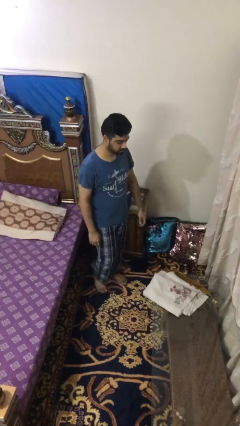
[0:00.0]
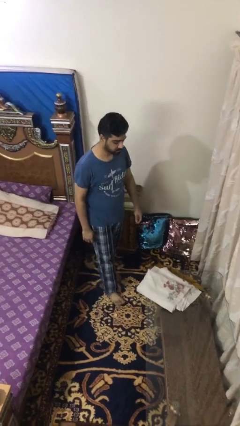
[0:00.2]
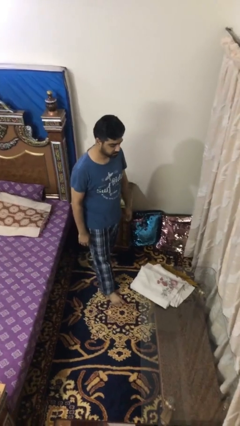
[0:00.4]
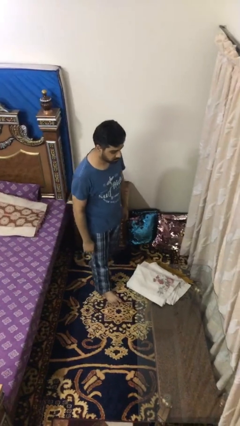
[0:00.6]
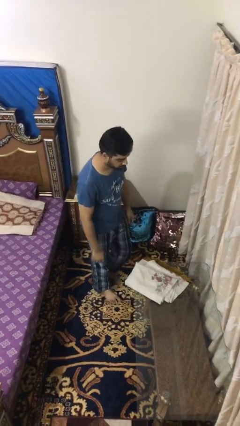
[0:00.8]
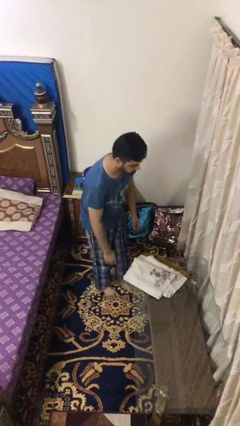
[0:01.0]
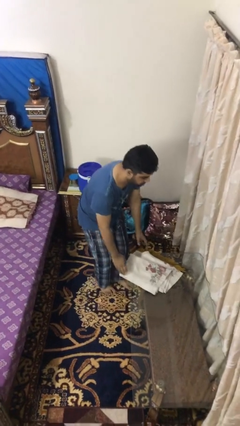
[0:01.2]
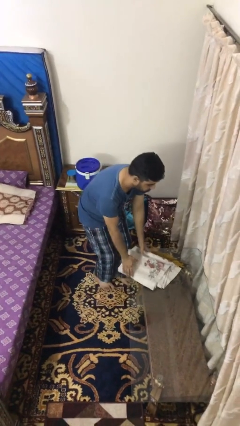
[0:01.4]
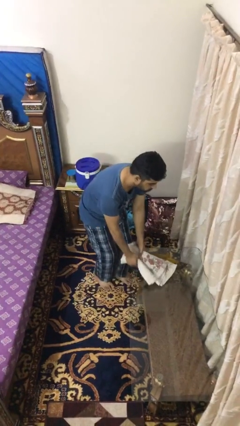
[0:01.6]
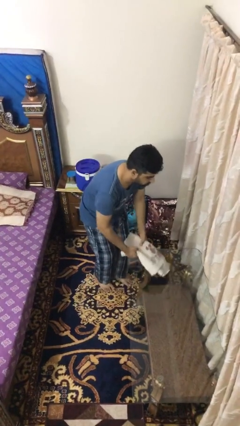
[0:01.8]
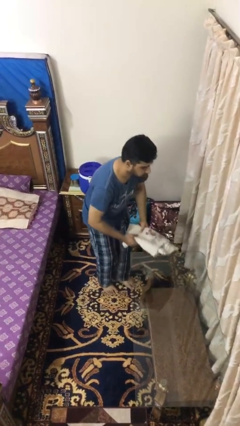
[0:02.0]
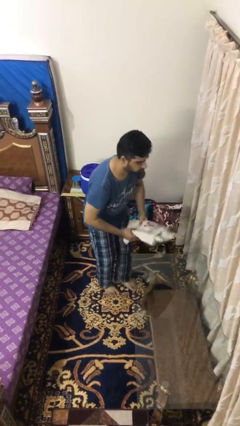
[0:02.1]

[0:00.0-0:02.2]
person picks up object from table

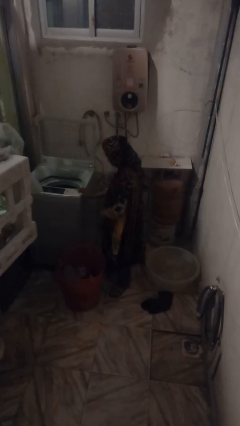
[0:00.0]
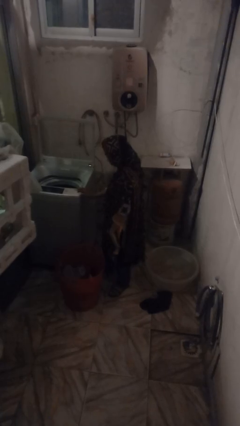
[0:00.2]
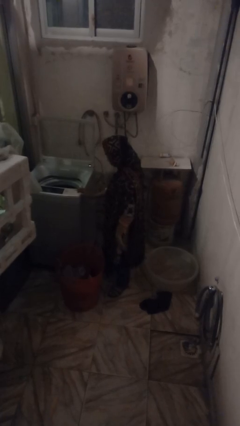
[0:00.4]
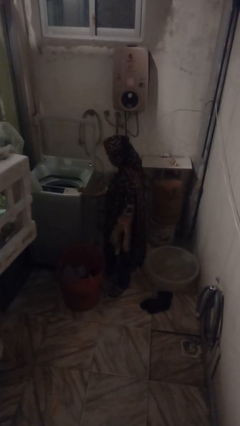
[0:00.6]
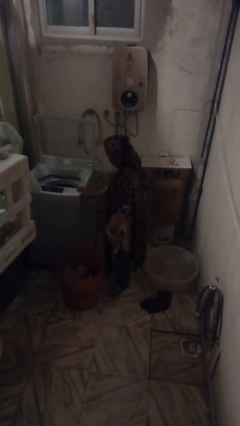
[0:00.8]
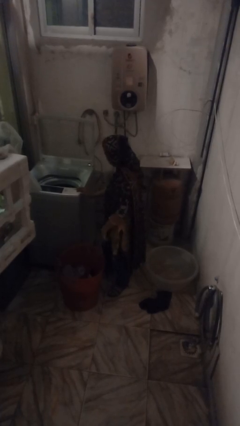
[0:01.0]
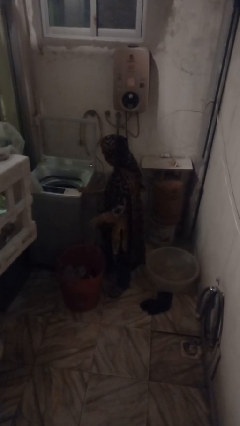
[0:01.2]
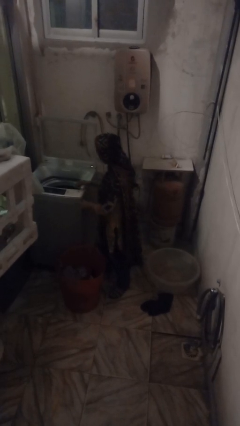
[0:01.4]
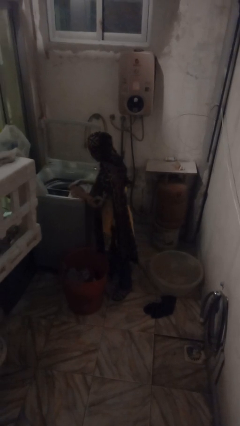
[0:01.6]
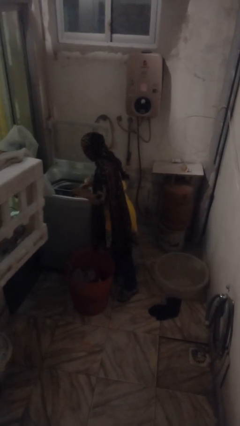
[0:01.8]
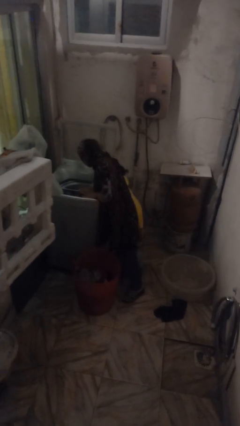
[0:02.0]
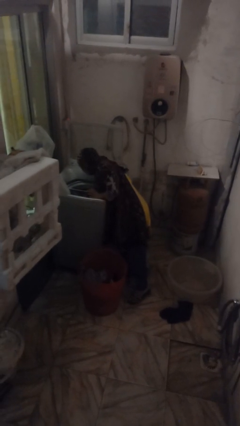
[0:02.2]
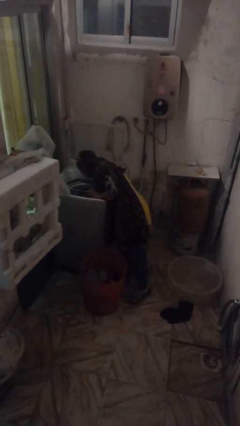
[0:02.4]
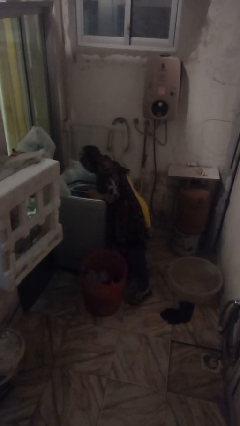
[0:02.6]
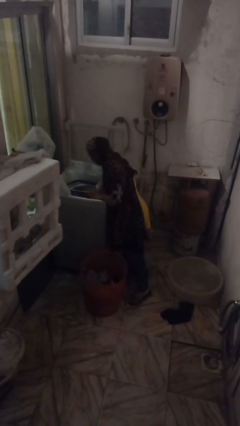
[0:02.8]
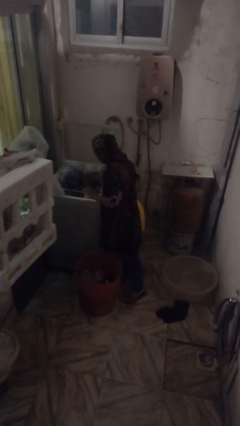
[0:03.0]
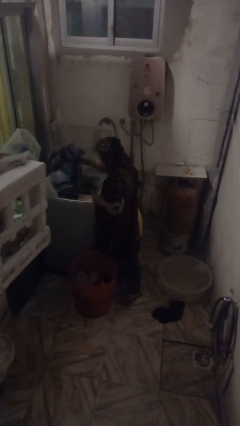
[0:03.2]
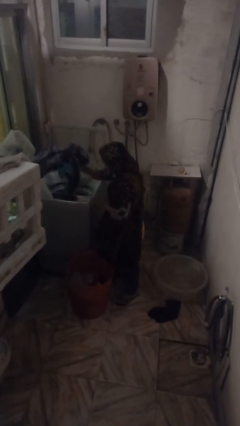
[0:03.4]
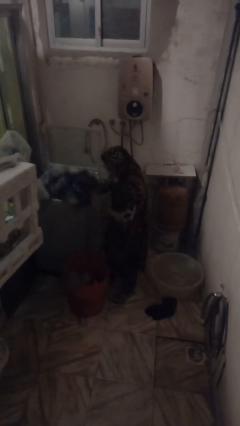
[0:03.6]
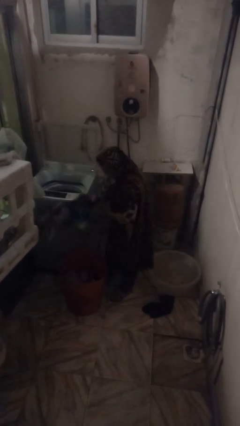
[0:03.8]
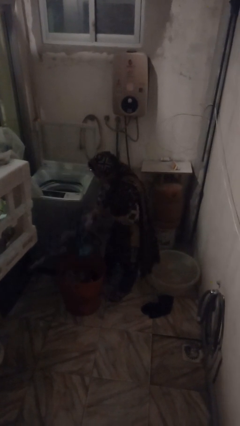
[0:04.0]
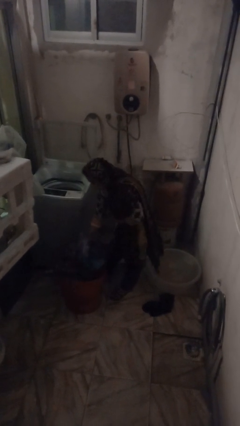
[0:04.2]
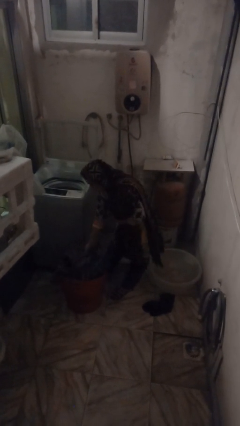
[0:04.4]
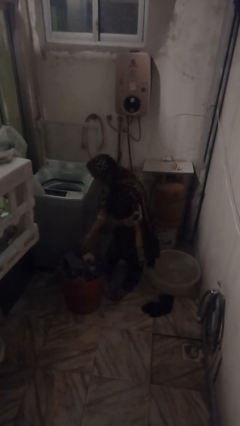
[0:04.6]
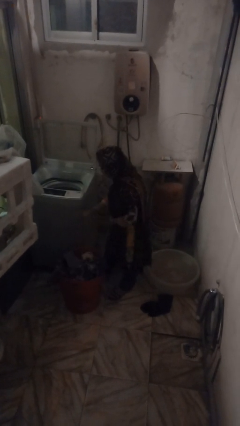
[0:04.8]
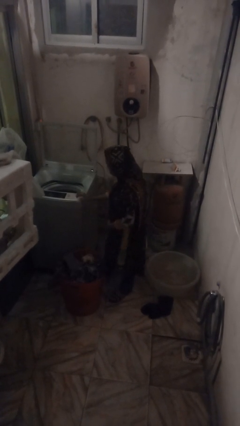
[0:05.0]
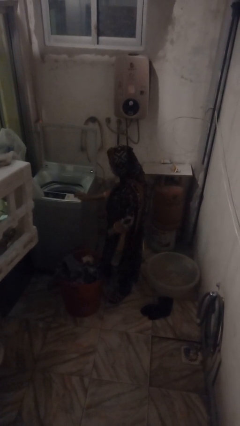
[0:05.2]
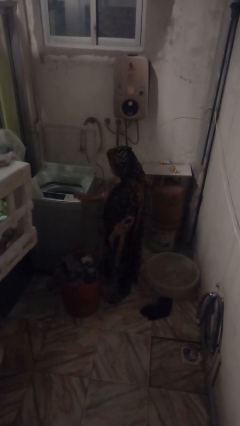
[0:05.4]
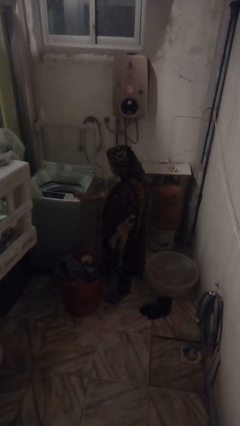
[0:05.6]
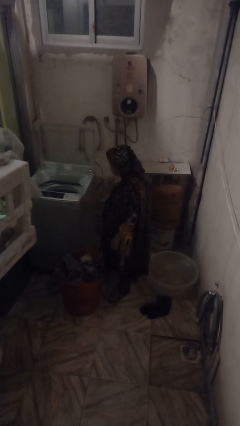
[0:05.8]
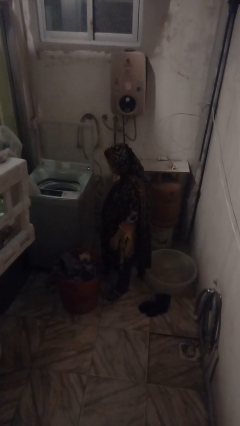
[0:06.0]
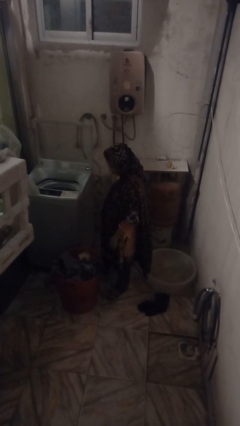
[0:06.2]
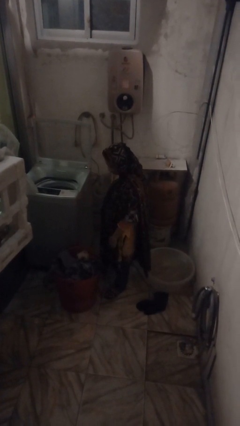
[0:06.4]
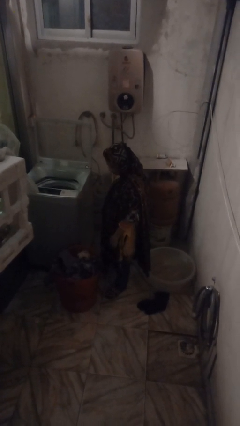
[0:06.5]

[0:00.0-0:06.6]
person unloads clotheswasher

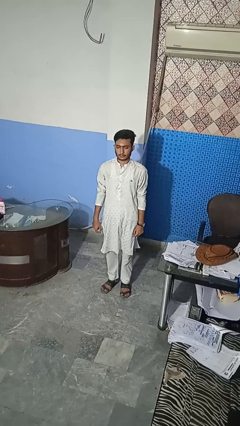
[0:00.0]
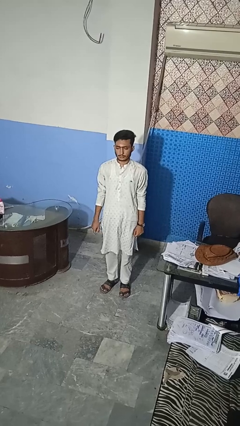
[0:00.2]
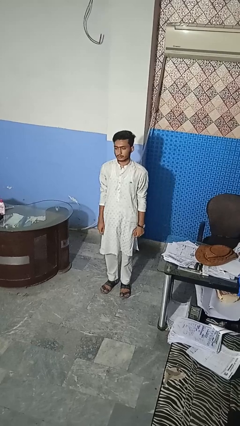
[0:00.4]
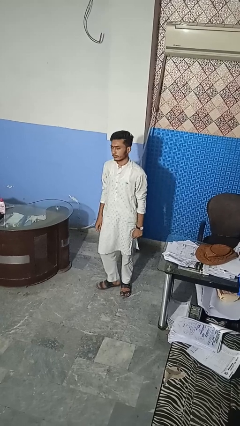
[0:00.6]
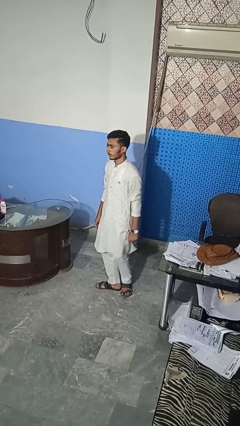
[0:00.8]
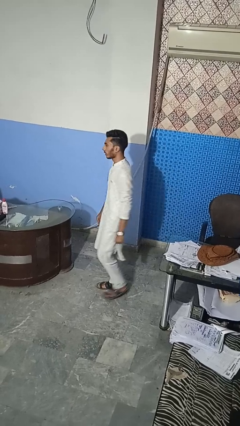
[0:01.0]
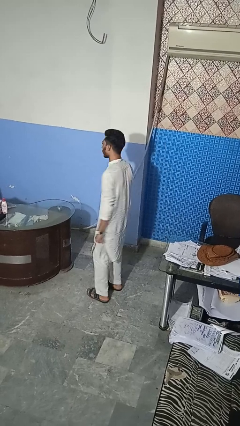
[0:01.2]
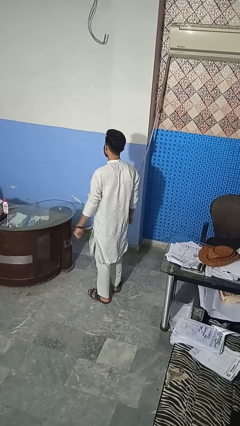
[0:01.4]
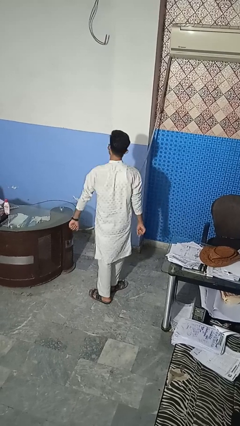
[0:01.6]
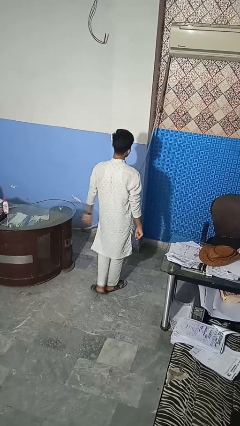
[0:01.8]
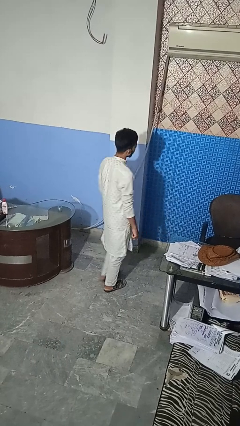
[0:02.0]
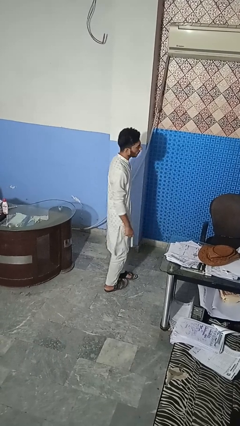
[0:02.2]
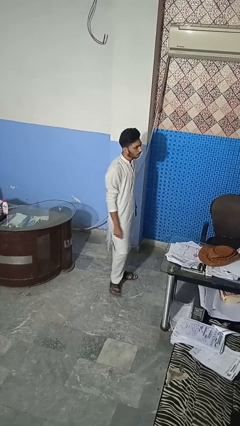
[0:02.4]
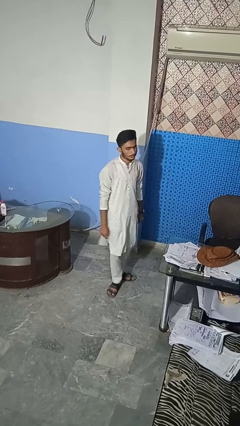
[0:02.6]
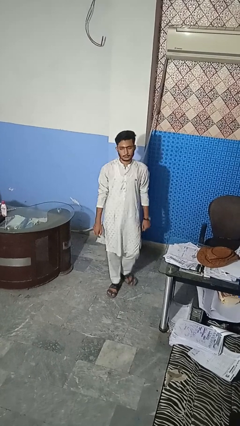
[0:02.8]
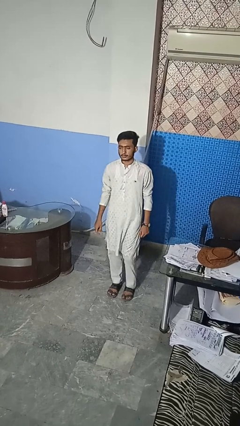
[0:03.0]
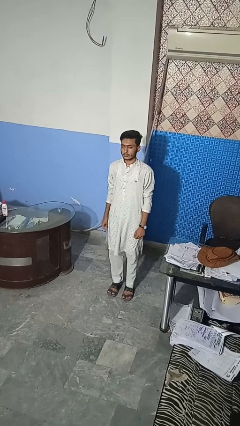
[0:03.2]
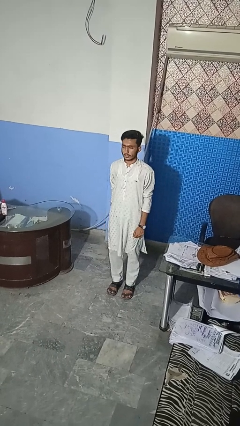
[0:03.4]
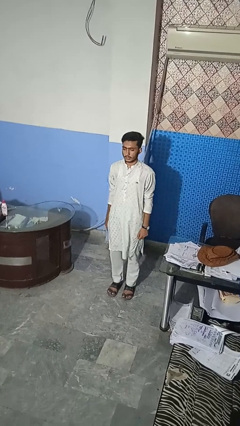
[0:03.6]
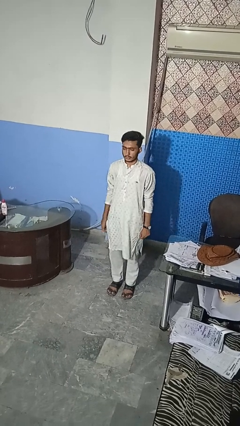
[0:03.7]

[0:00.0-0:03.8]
person twirls

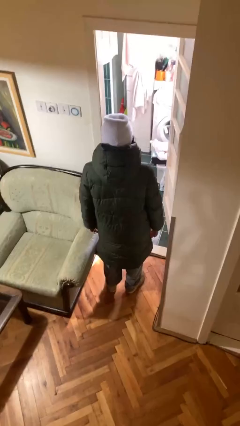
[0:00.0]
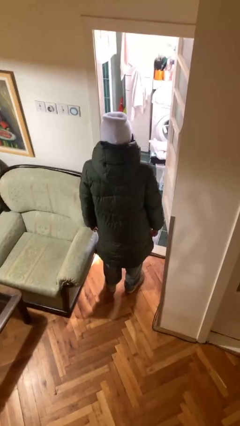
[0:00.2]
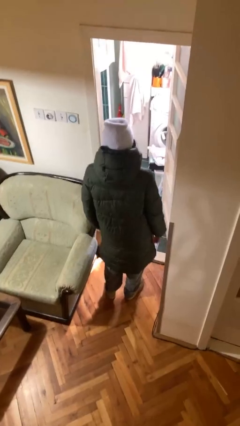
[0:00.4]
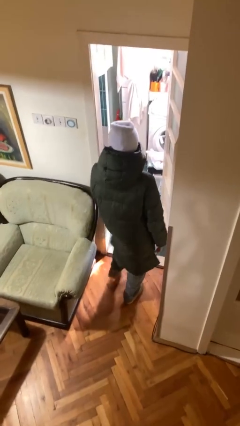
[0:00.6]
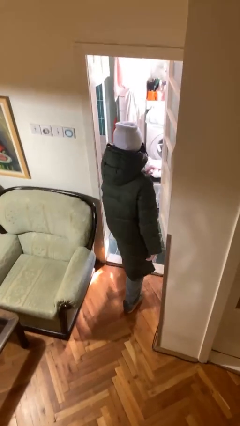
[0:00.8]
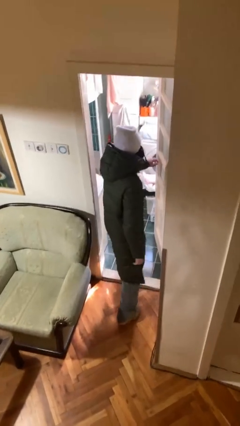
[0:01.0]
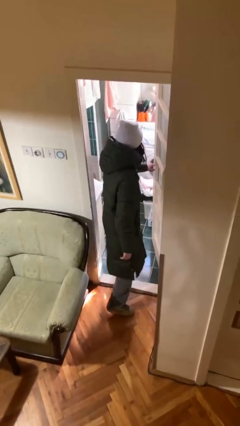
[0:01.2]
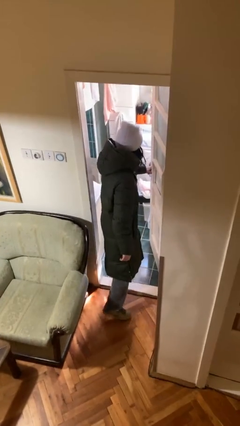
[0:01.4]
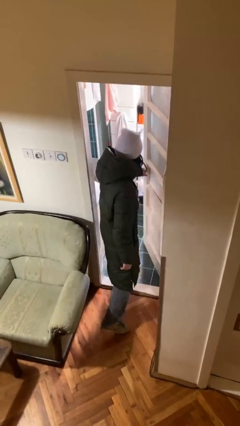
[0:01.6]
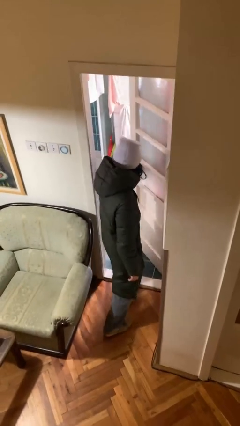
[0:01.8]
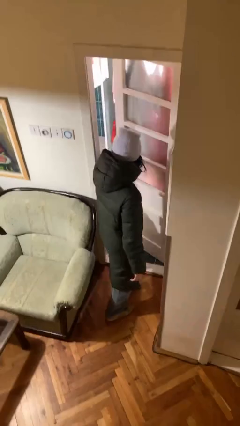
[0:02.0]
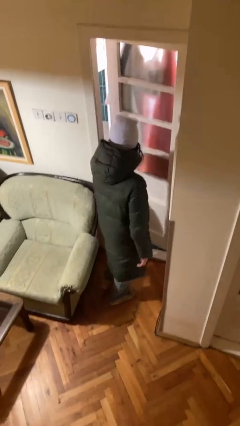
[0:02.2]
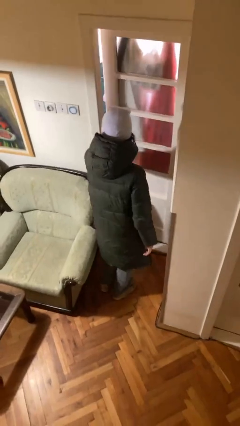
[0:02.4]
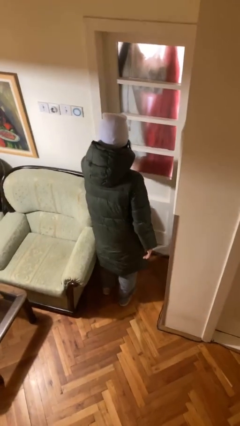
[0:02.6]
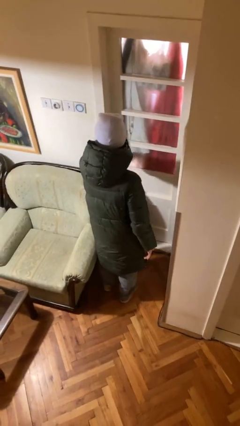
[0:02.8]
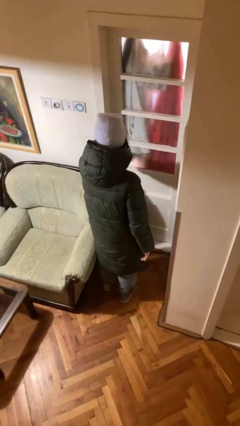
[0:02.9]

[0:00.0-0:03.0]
person closes facility door

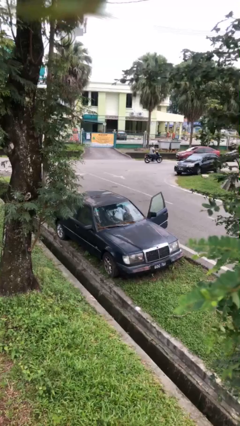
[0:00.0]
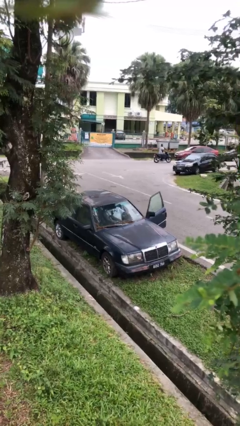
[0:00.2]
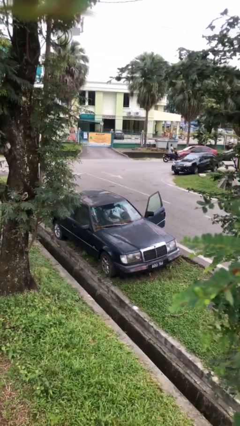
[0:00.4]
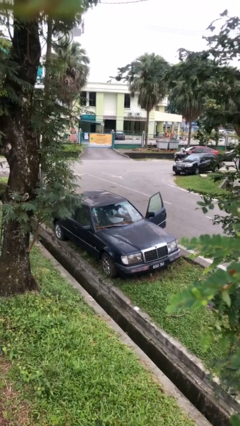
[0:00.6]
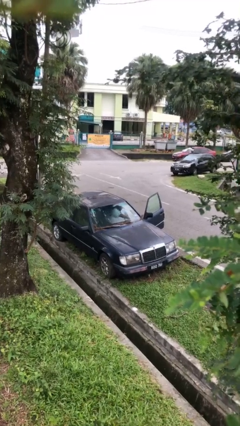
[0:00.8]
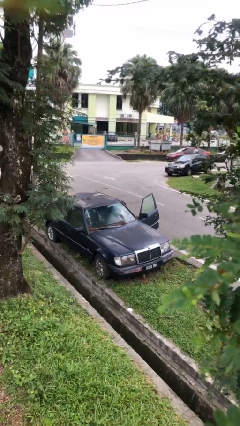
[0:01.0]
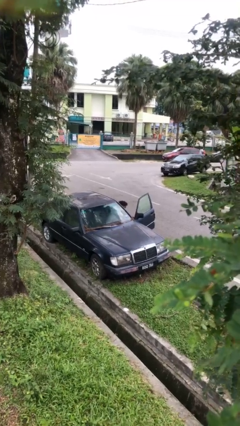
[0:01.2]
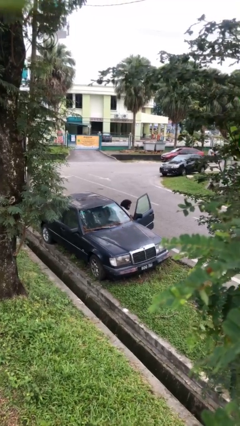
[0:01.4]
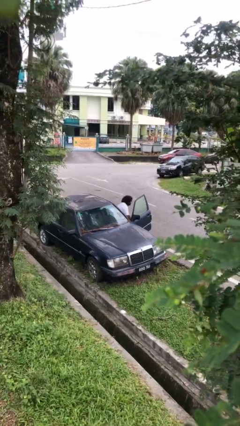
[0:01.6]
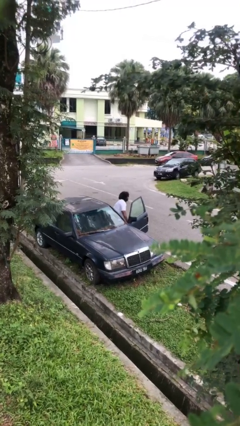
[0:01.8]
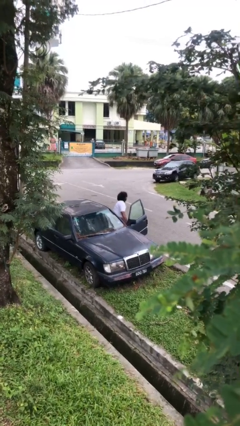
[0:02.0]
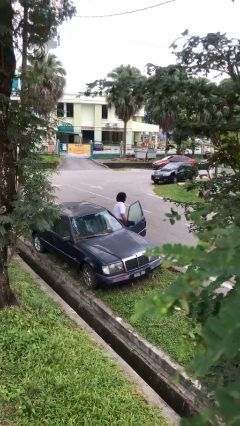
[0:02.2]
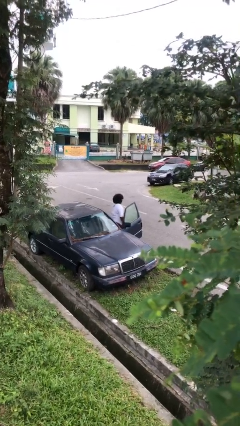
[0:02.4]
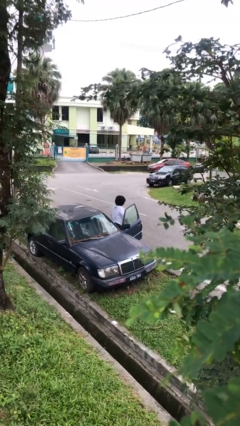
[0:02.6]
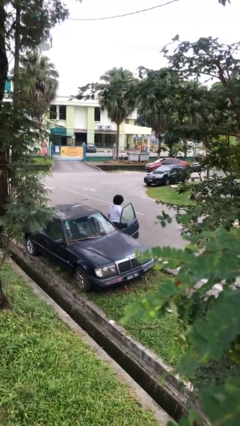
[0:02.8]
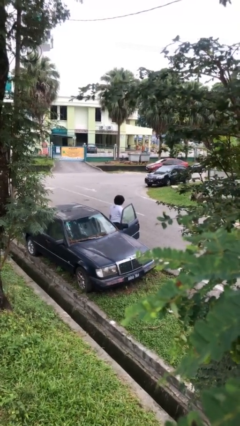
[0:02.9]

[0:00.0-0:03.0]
person exits car
